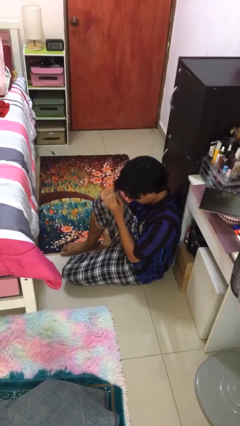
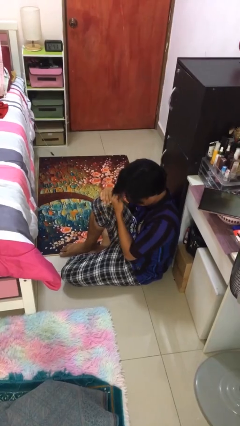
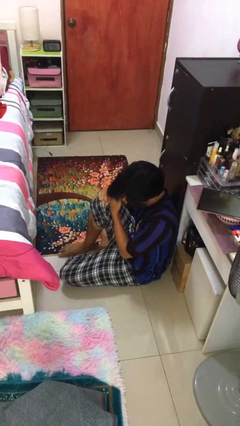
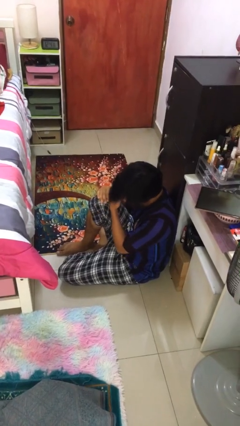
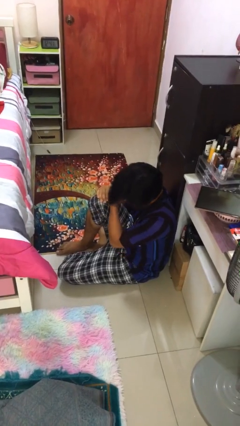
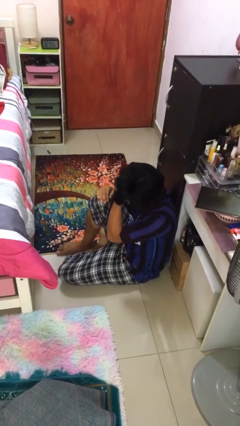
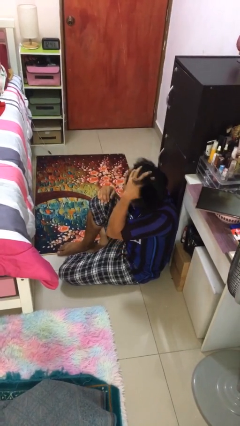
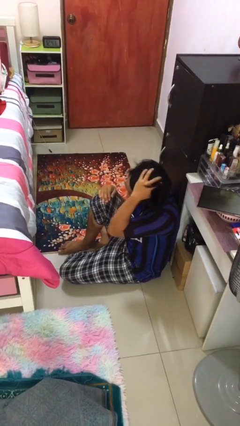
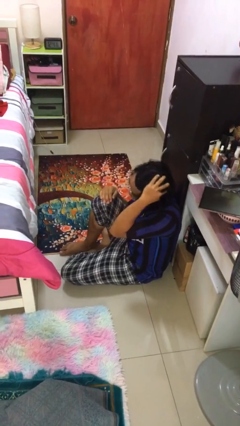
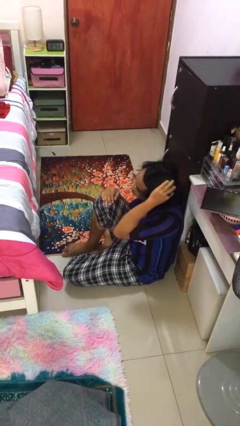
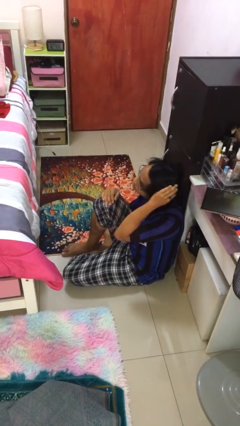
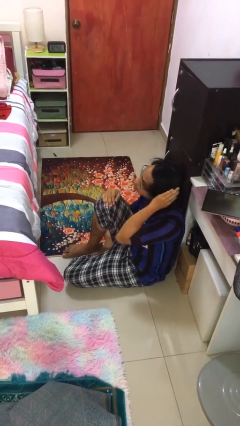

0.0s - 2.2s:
person strokes hair

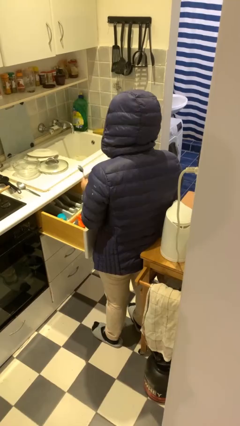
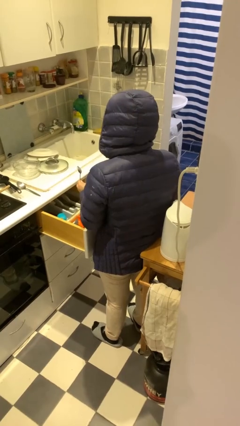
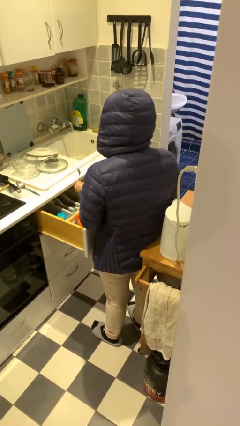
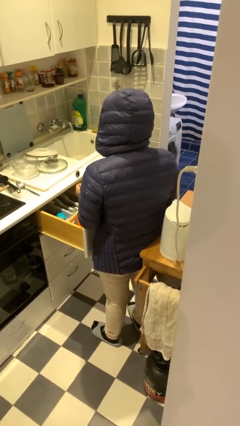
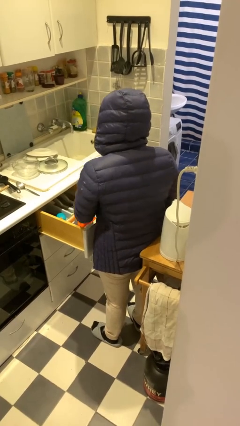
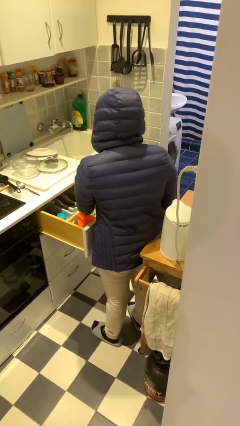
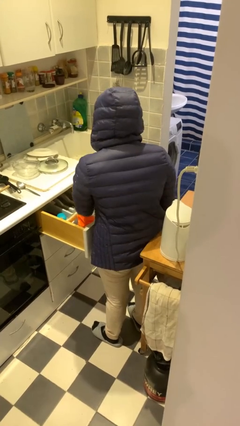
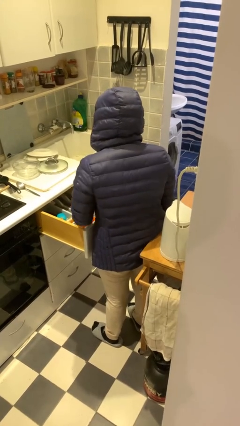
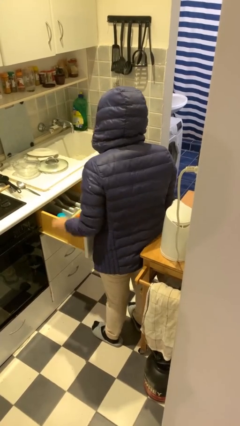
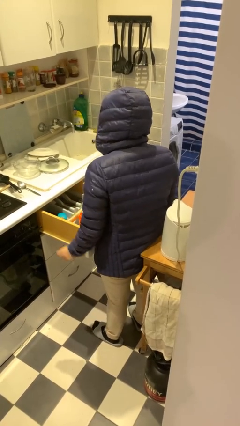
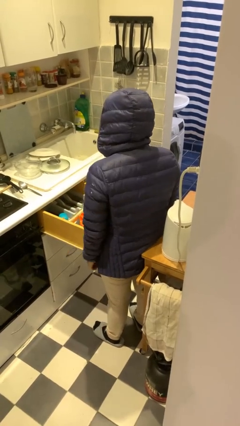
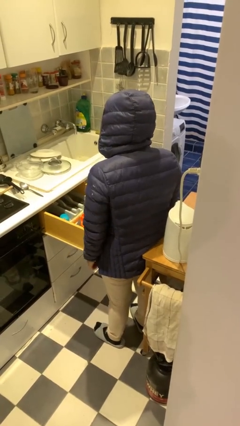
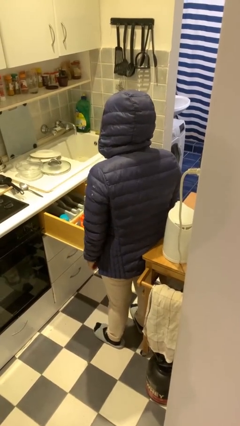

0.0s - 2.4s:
person puts object into kitchen drawer

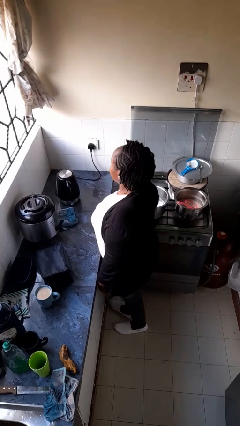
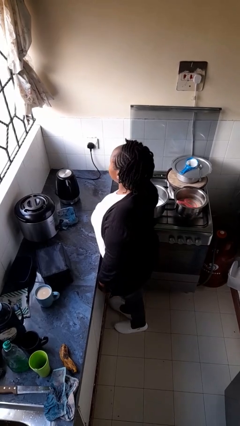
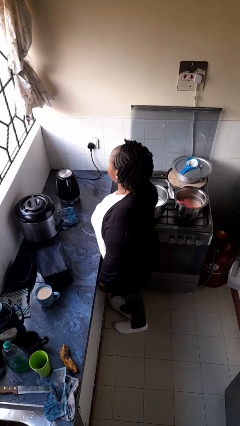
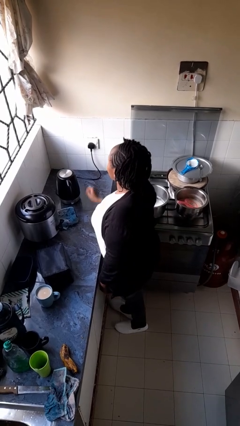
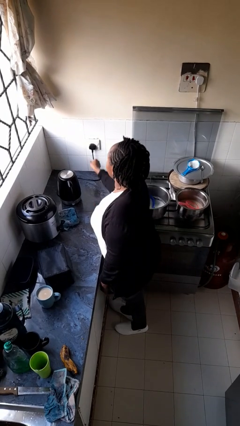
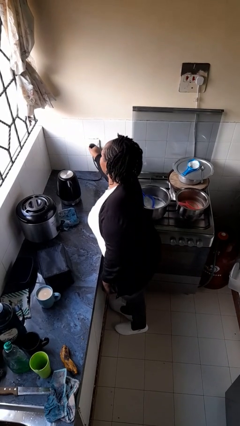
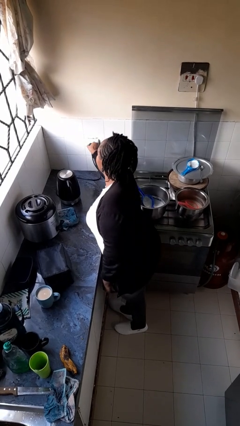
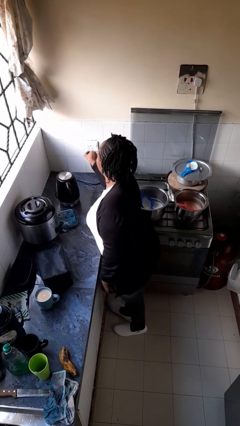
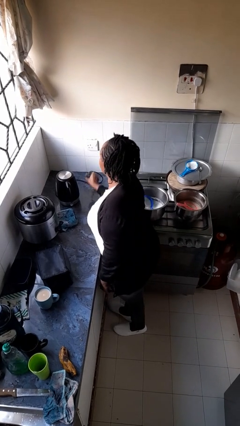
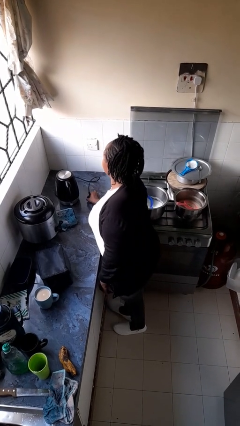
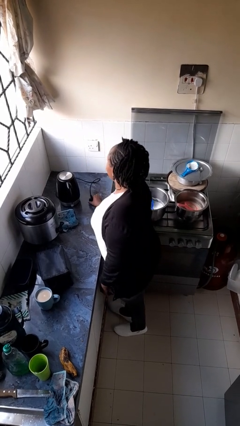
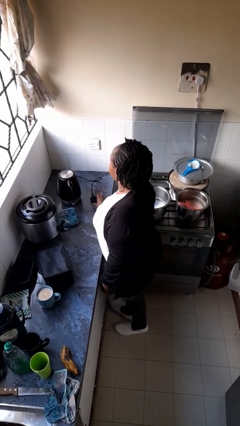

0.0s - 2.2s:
person unplugs from electrical socket

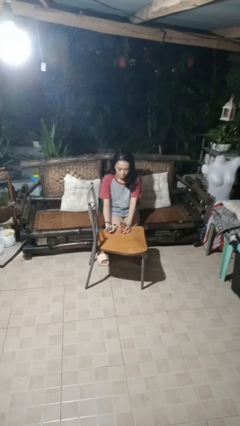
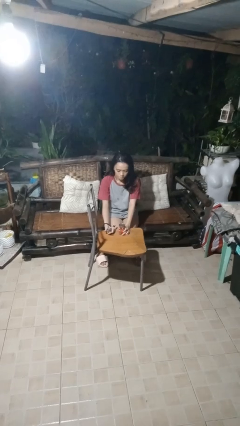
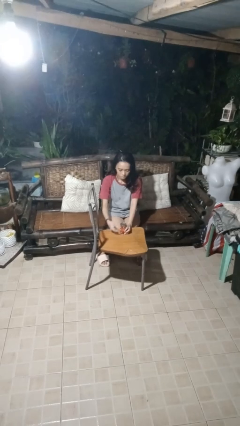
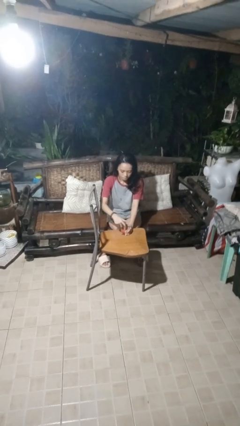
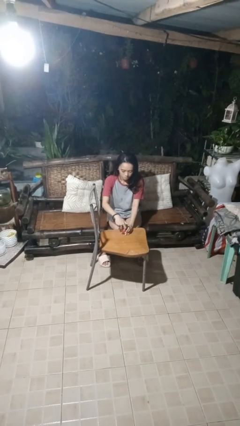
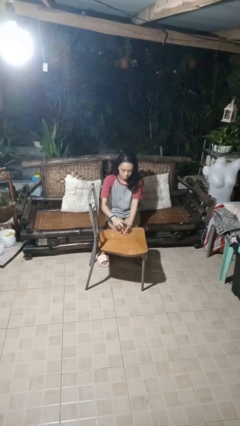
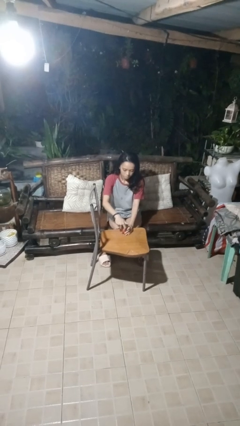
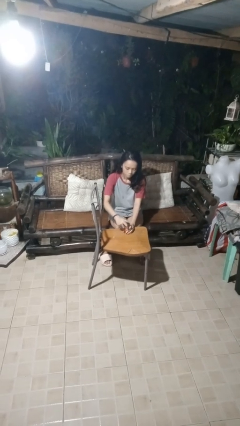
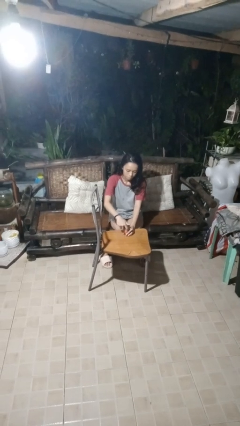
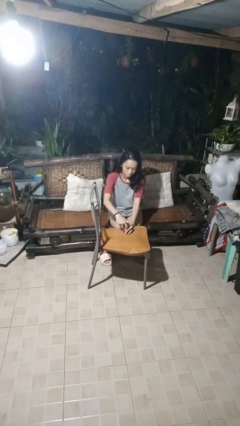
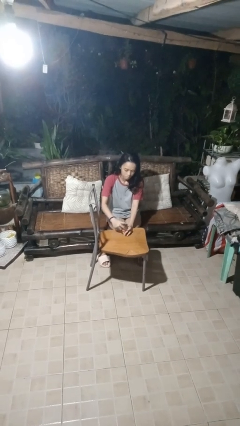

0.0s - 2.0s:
person opens can with can opener

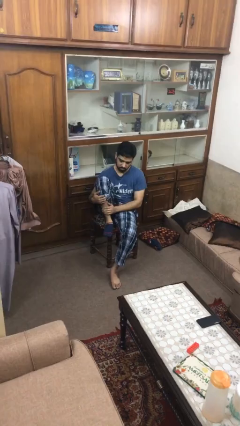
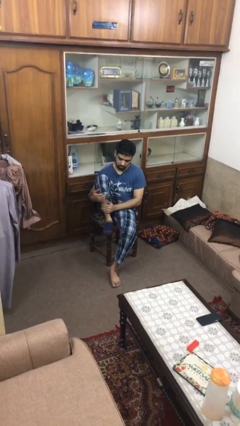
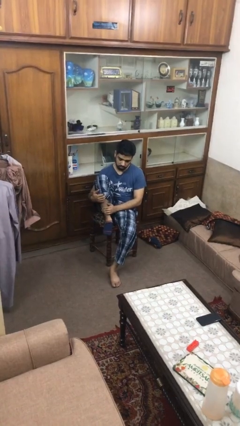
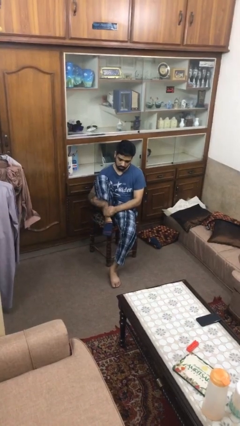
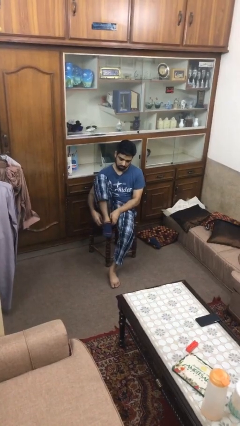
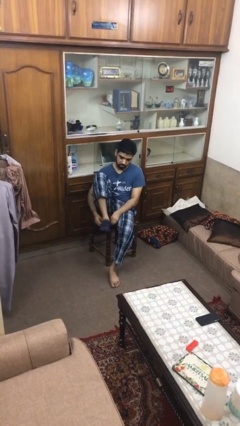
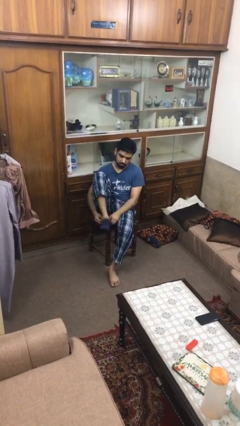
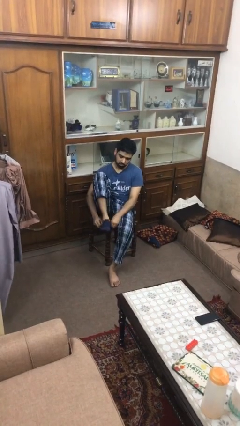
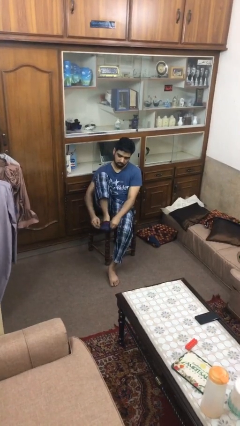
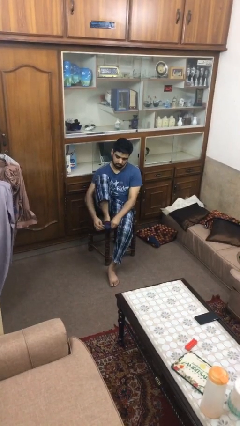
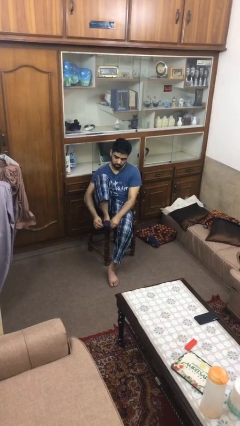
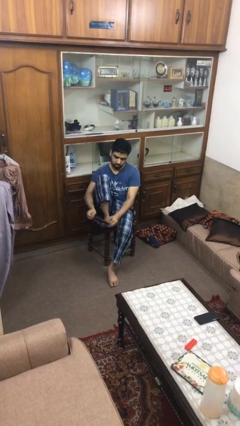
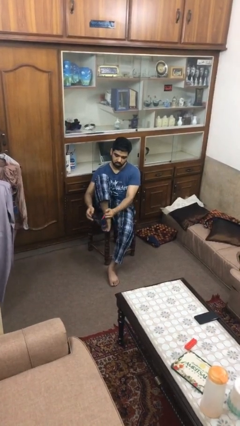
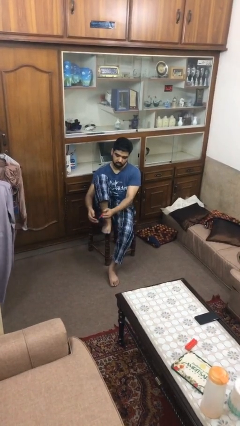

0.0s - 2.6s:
person takes off socks

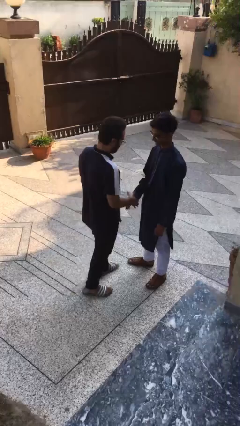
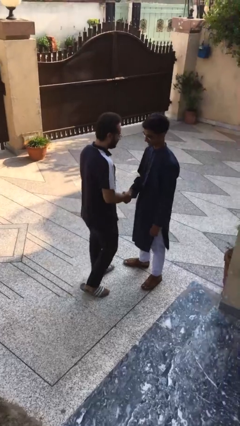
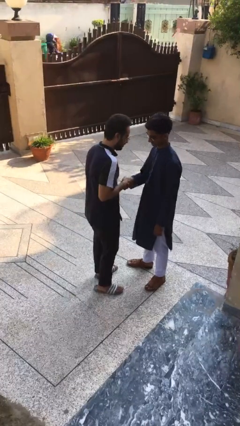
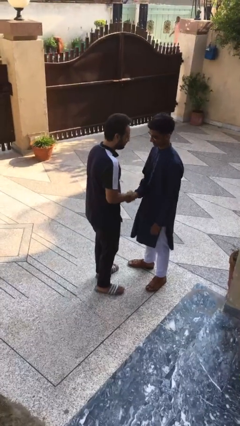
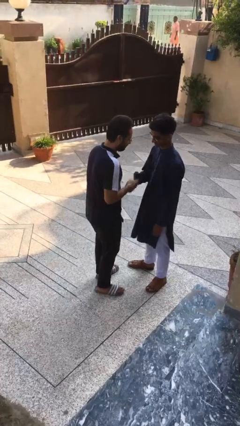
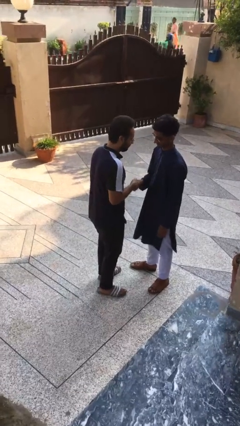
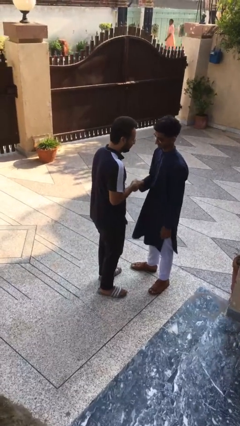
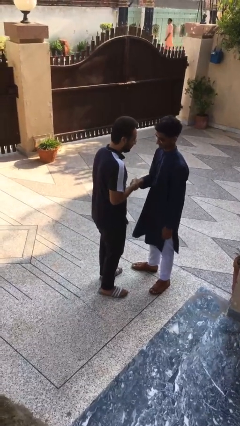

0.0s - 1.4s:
person shakes hand

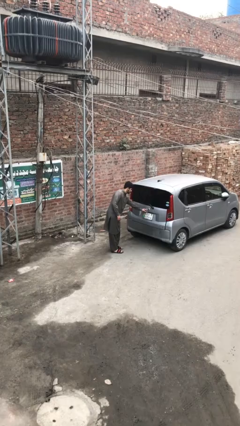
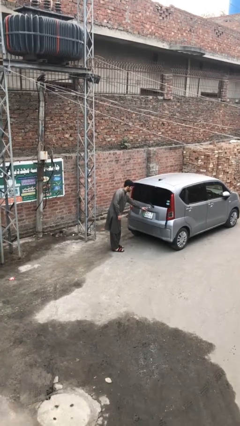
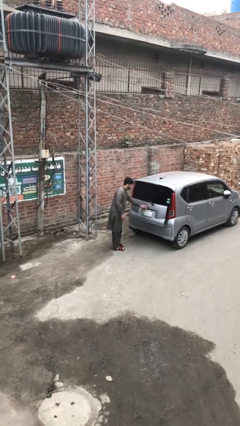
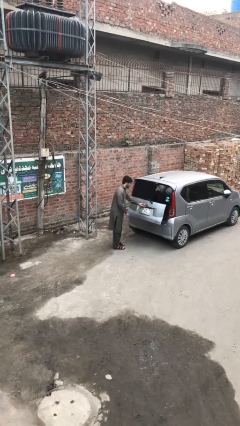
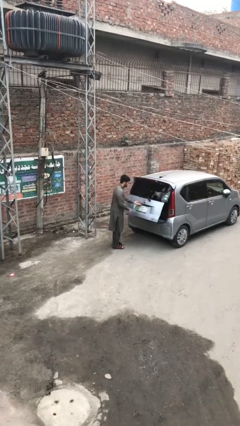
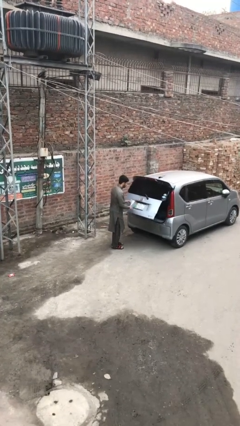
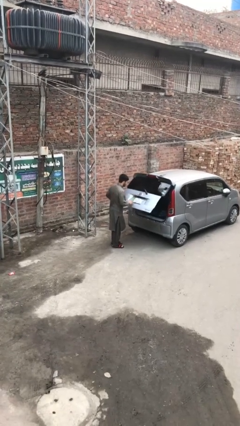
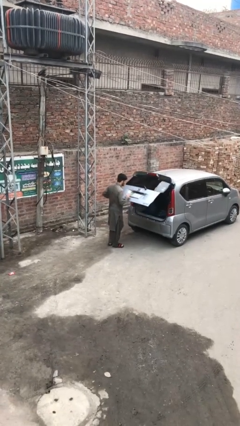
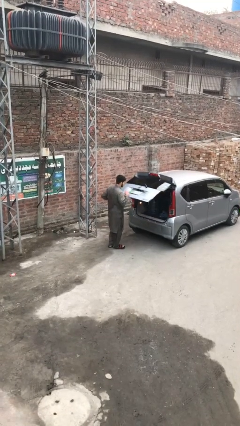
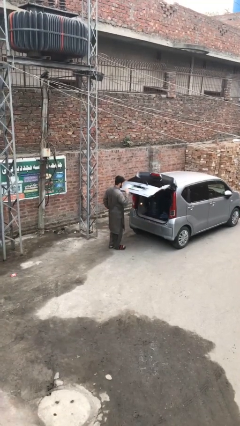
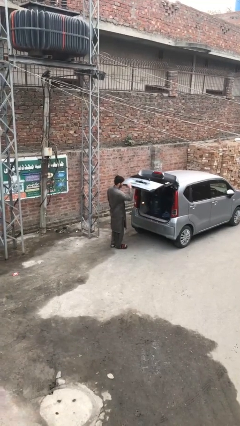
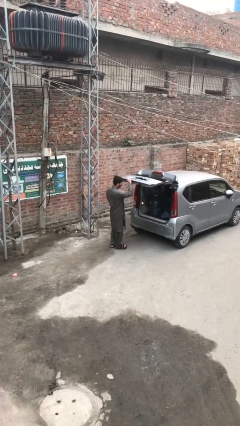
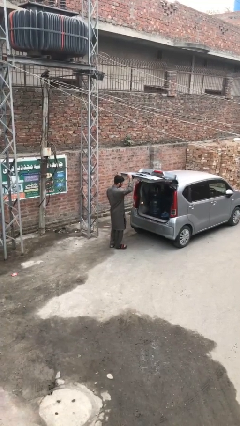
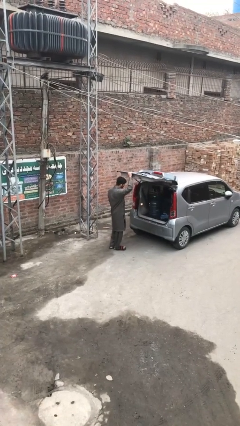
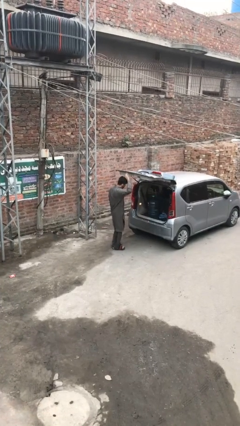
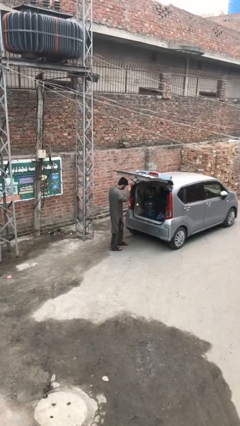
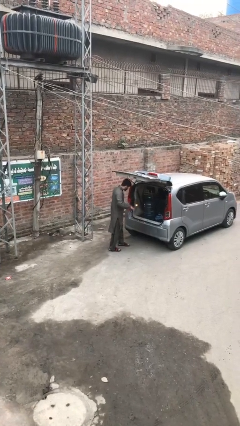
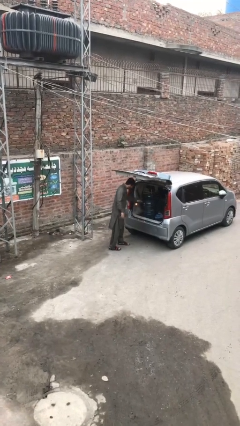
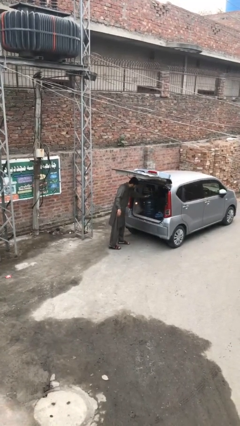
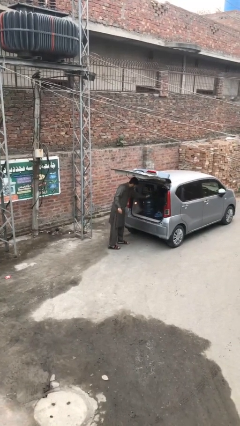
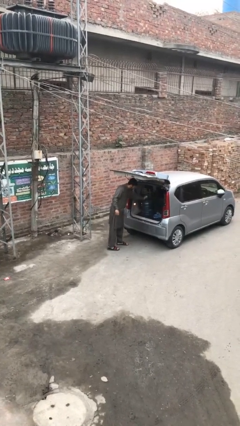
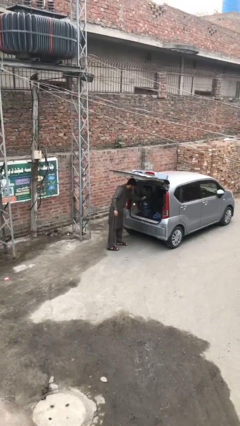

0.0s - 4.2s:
person opens car trunk

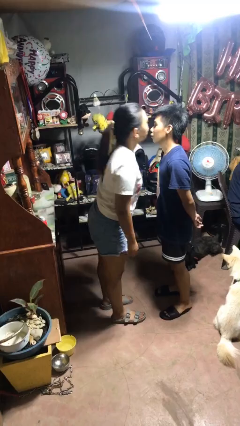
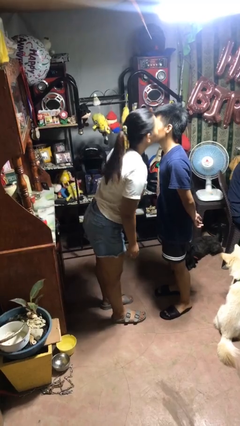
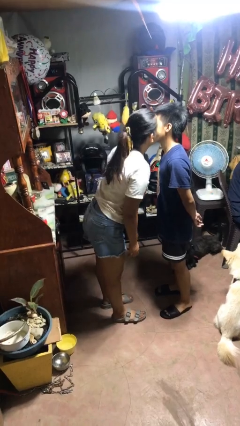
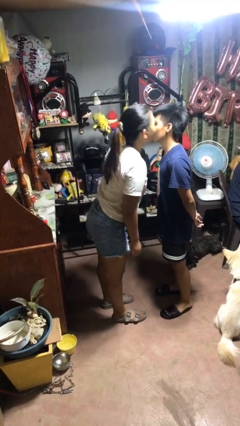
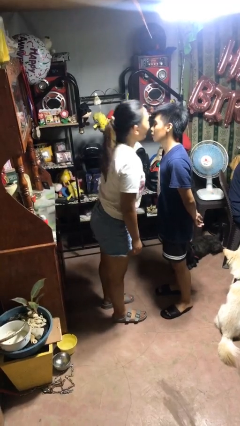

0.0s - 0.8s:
person kisses cheek of person
